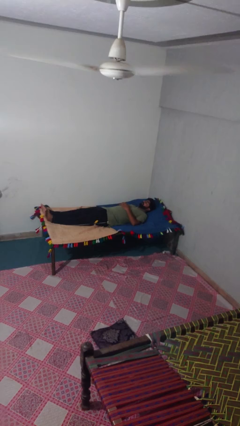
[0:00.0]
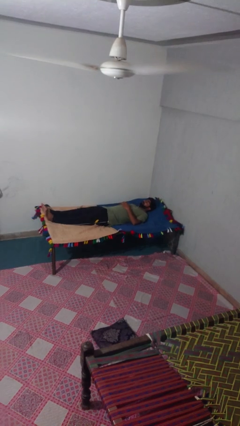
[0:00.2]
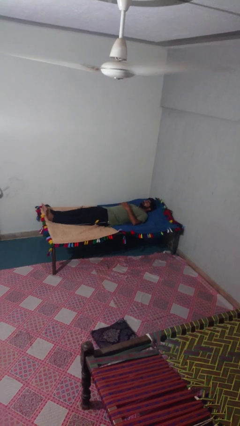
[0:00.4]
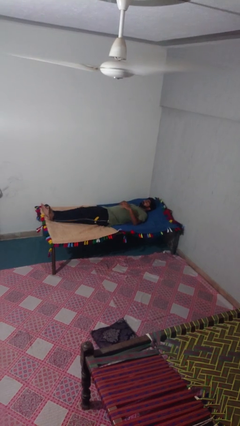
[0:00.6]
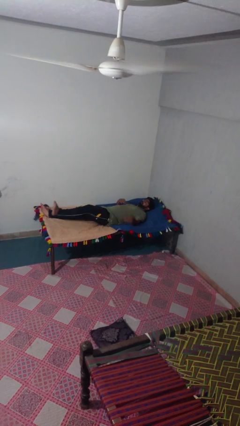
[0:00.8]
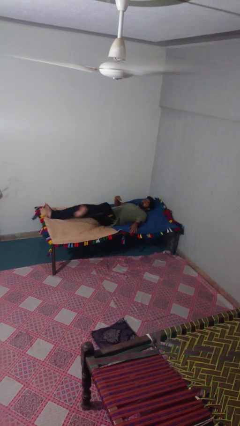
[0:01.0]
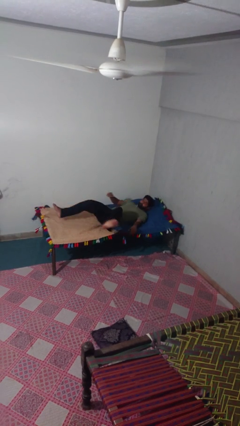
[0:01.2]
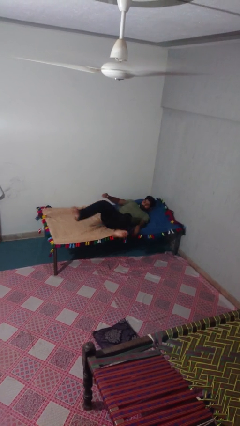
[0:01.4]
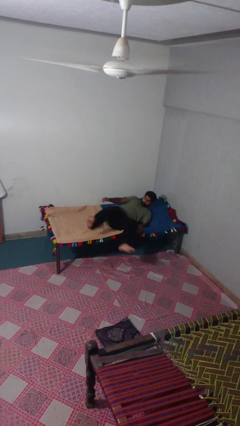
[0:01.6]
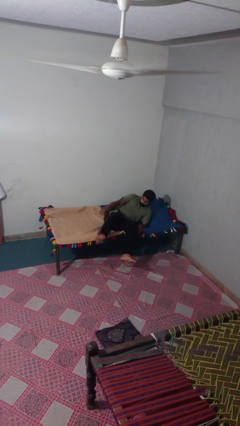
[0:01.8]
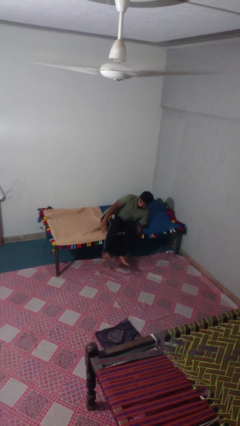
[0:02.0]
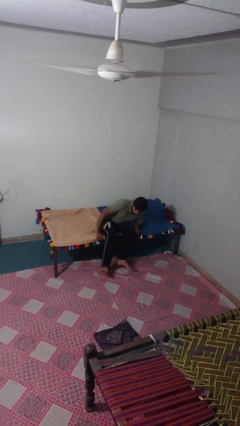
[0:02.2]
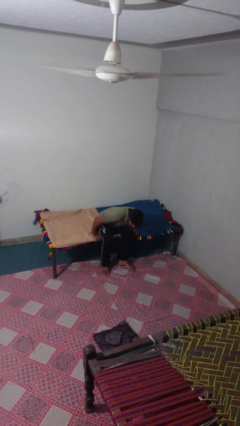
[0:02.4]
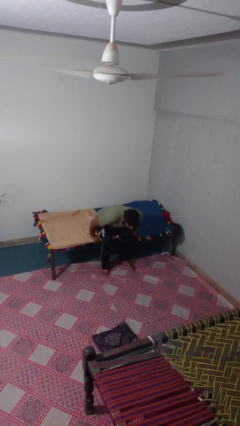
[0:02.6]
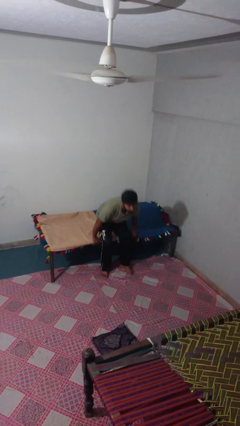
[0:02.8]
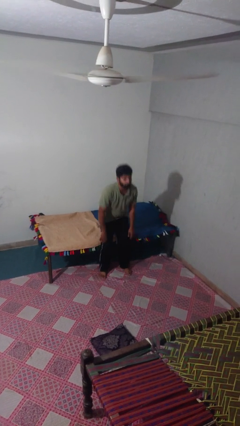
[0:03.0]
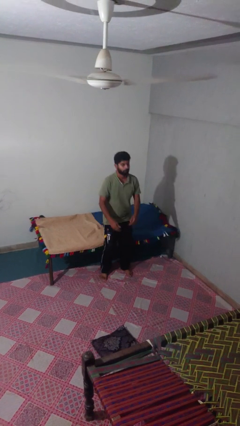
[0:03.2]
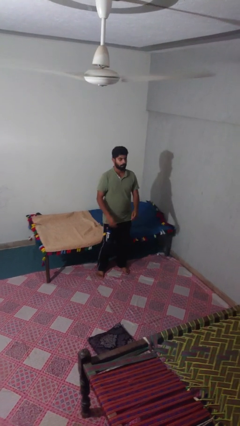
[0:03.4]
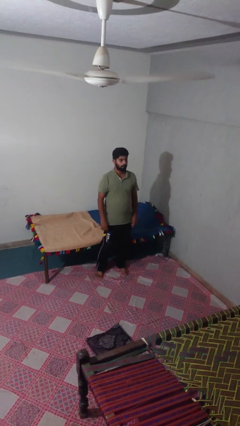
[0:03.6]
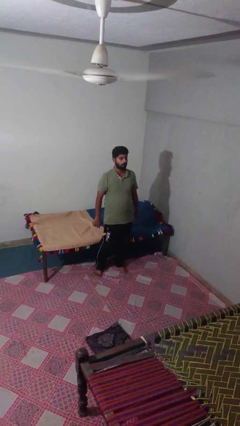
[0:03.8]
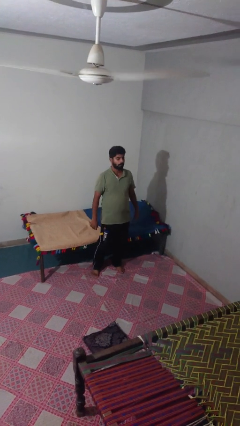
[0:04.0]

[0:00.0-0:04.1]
person stands up

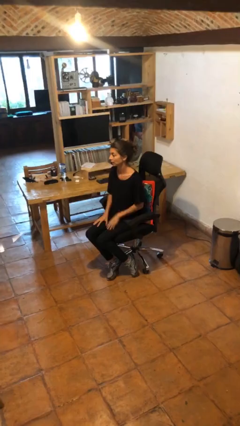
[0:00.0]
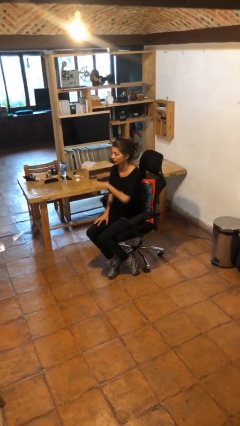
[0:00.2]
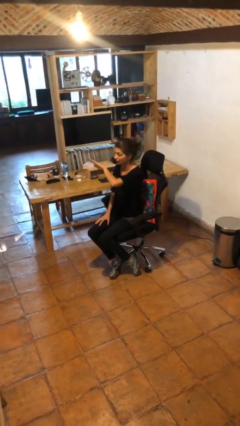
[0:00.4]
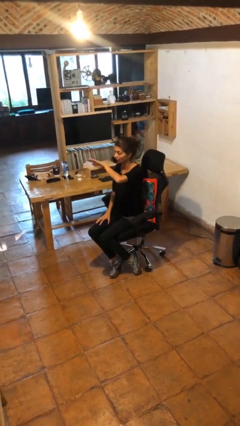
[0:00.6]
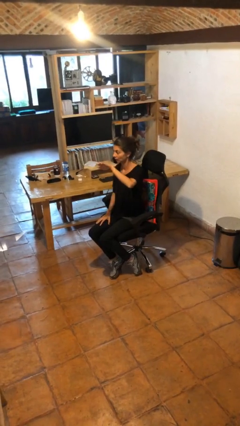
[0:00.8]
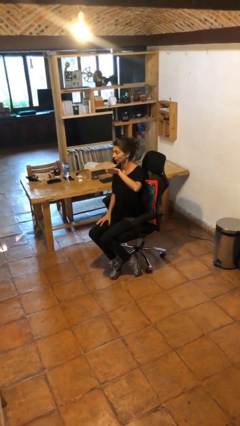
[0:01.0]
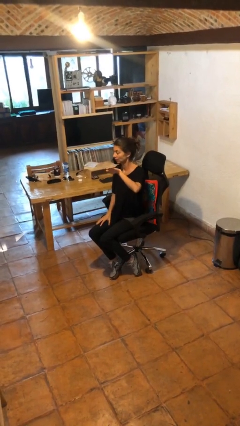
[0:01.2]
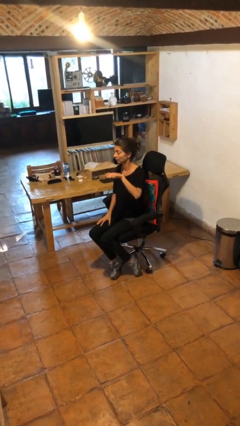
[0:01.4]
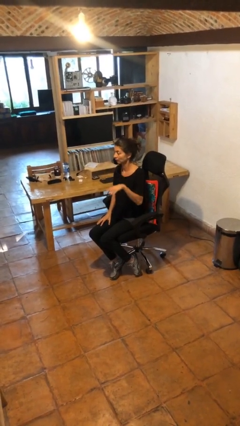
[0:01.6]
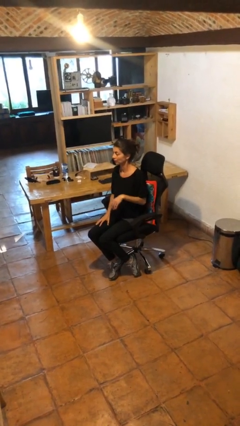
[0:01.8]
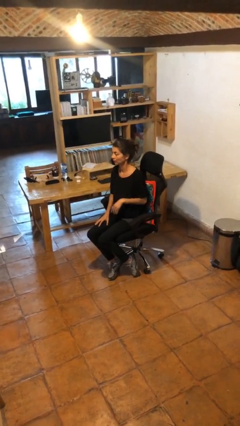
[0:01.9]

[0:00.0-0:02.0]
person gestures swipe left

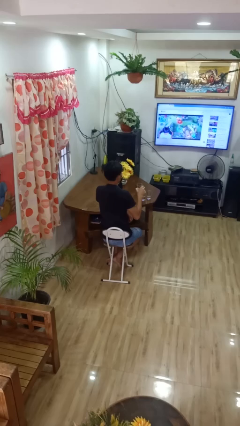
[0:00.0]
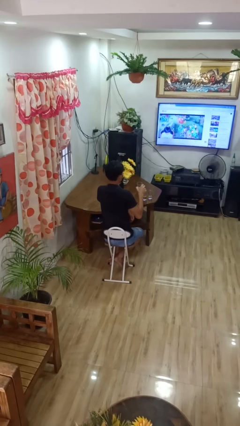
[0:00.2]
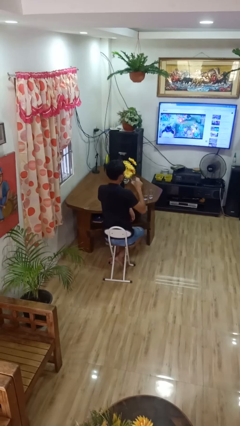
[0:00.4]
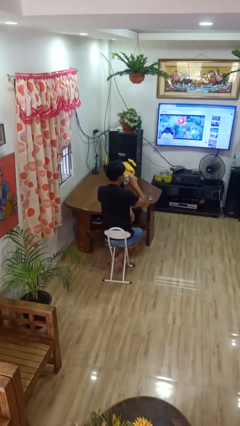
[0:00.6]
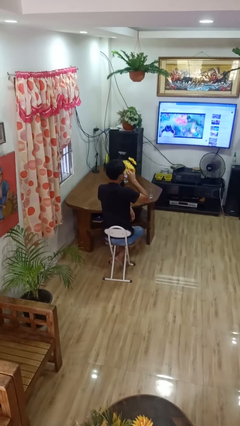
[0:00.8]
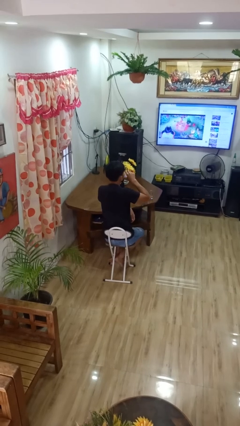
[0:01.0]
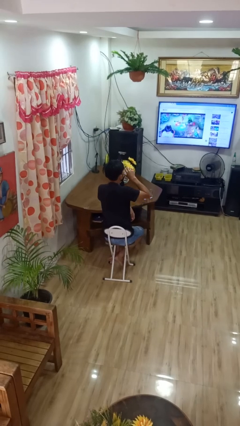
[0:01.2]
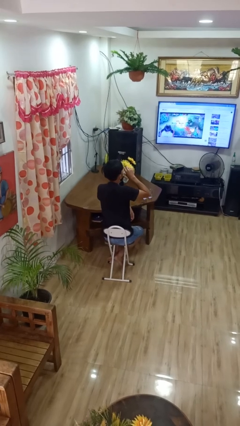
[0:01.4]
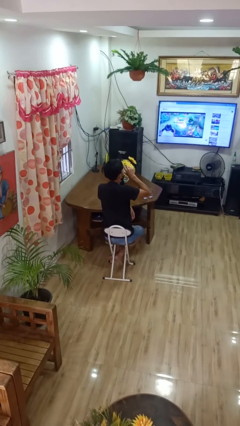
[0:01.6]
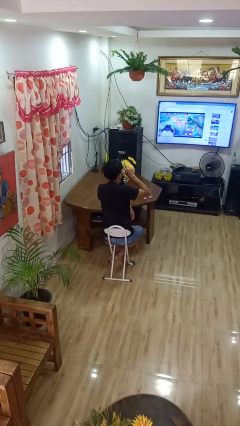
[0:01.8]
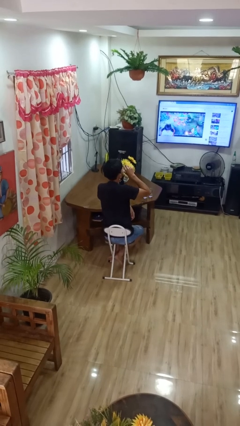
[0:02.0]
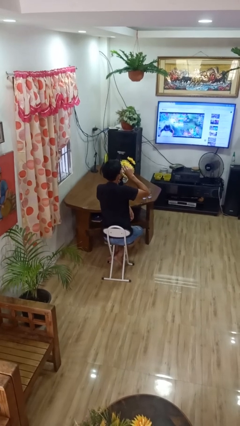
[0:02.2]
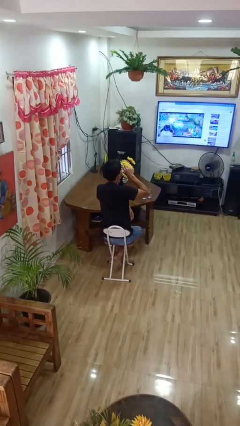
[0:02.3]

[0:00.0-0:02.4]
person drinks from shotglass

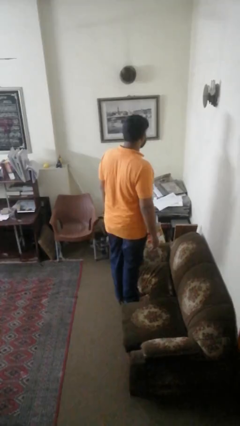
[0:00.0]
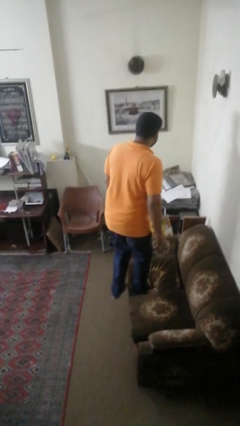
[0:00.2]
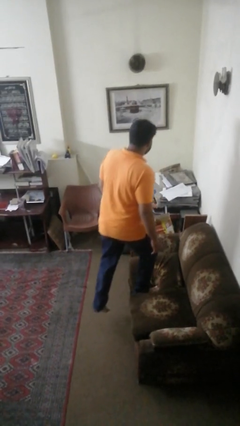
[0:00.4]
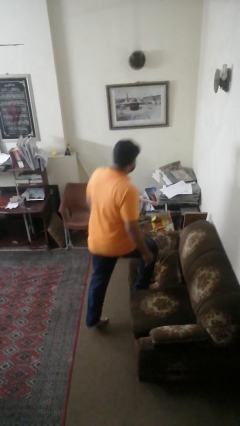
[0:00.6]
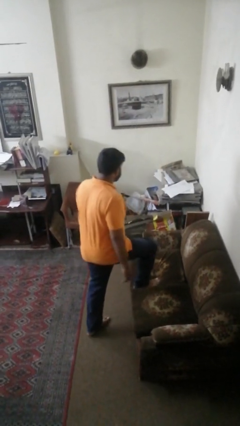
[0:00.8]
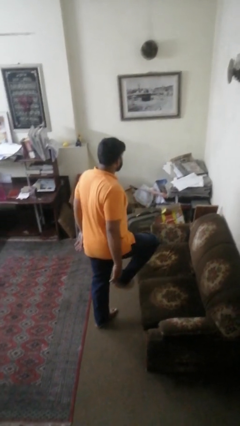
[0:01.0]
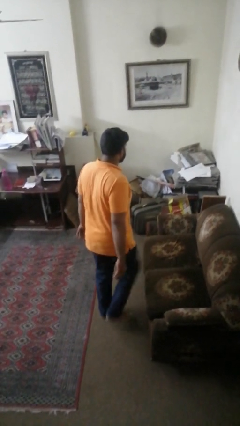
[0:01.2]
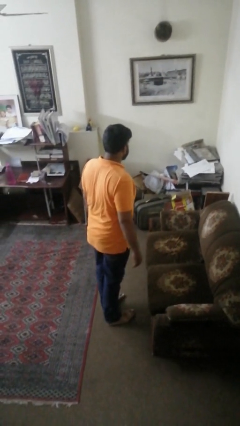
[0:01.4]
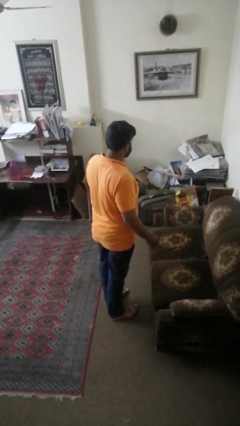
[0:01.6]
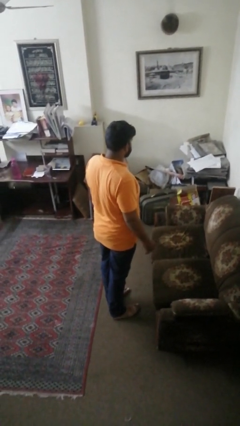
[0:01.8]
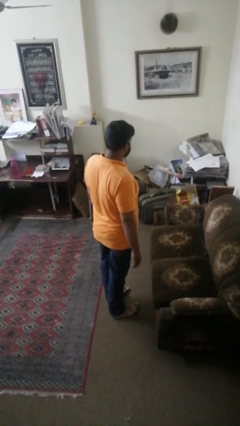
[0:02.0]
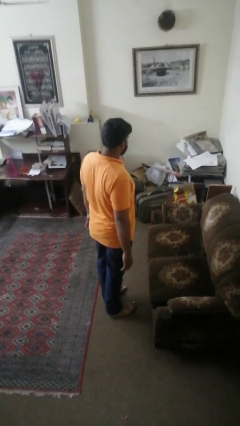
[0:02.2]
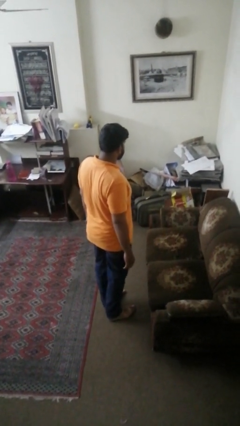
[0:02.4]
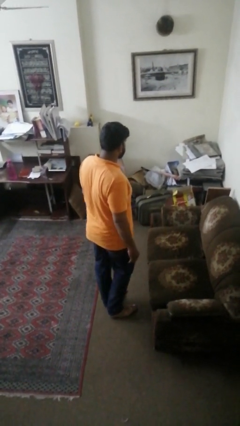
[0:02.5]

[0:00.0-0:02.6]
person climbs off couch

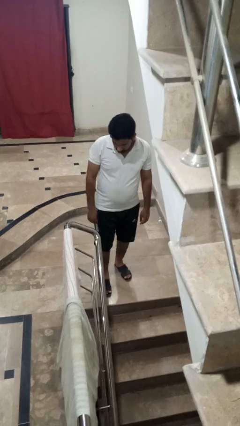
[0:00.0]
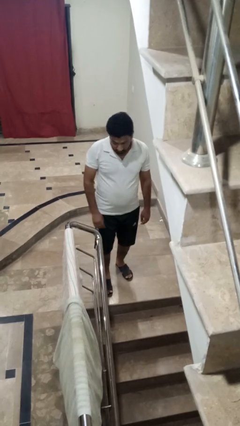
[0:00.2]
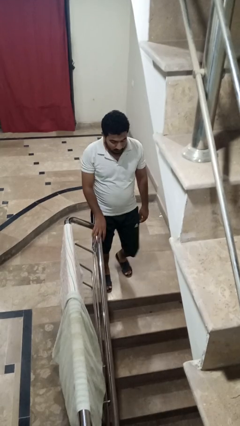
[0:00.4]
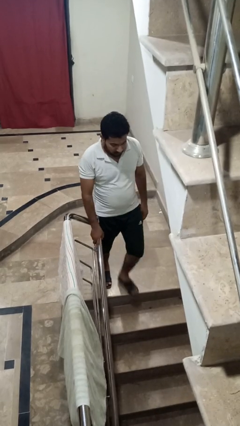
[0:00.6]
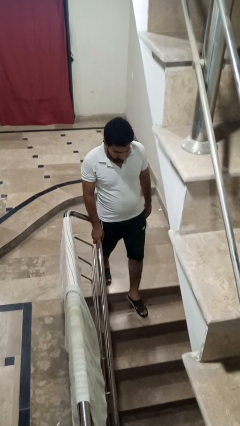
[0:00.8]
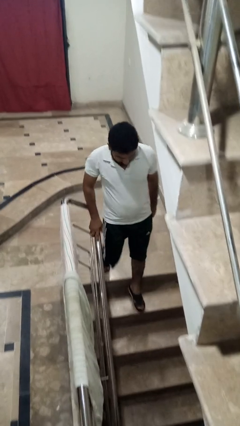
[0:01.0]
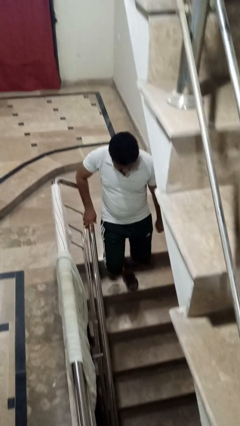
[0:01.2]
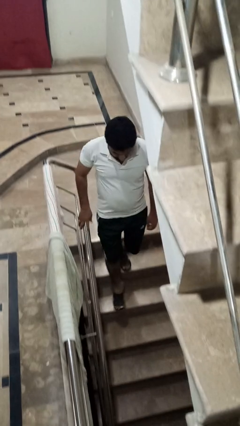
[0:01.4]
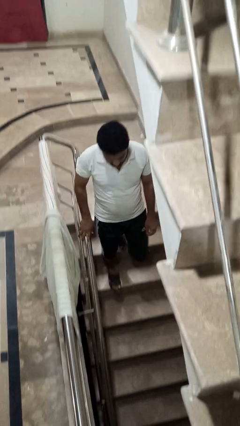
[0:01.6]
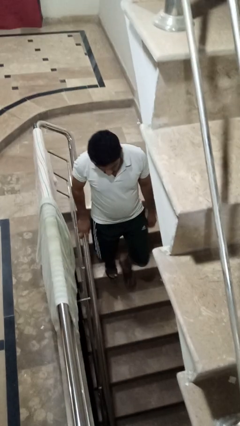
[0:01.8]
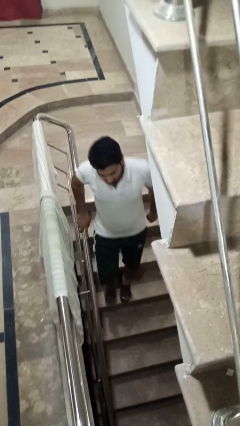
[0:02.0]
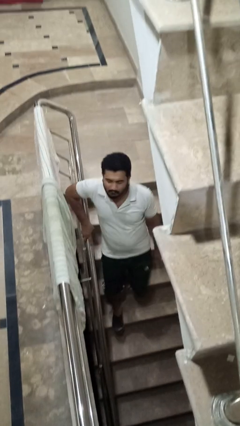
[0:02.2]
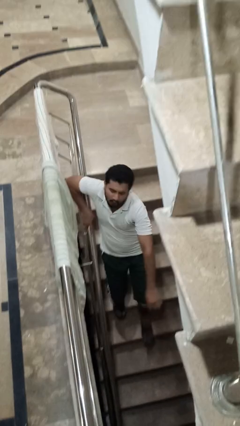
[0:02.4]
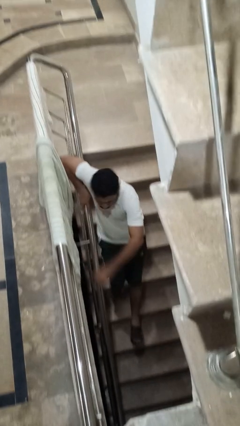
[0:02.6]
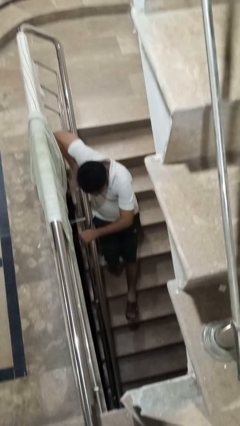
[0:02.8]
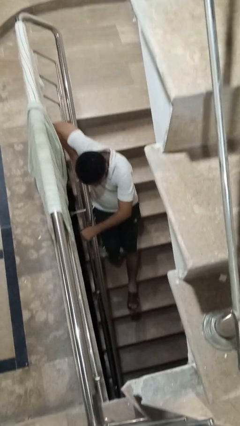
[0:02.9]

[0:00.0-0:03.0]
person climbs down stairs

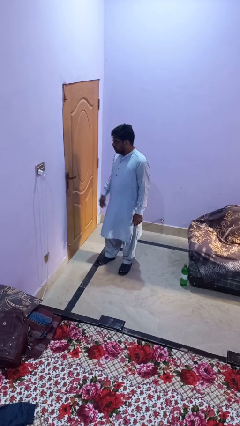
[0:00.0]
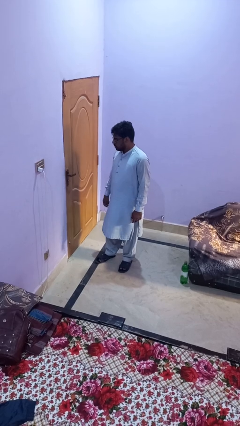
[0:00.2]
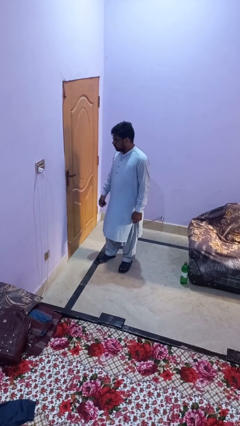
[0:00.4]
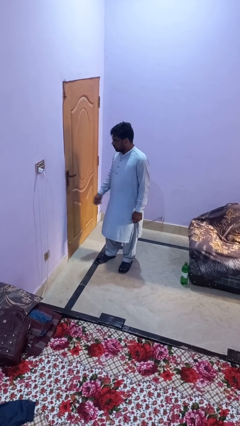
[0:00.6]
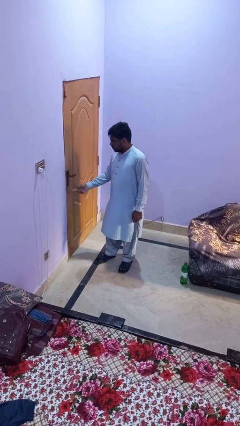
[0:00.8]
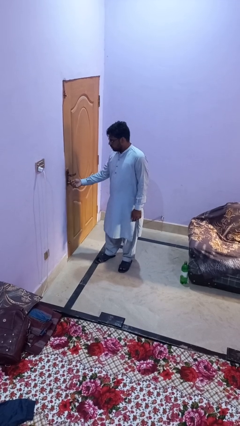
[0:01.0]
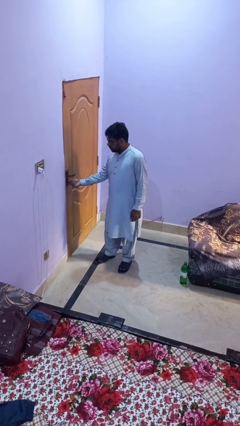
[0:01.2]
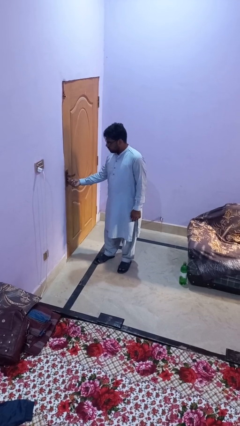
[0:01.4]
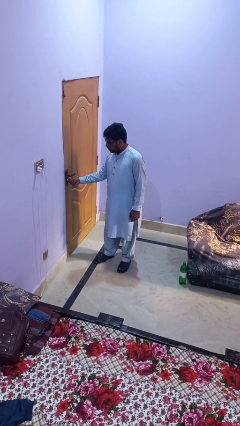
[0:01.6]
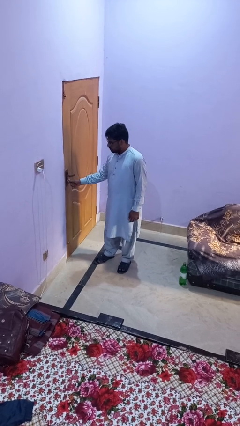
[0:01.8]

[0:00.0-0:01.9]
person locks door with keys

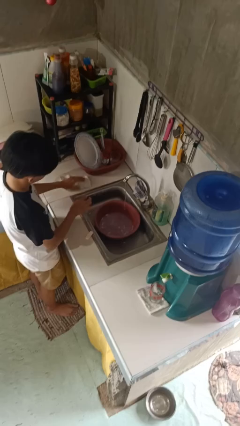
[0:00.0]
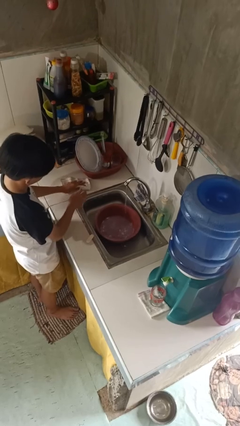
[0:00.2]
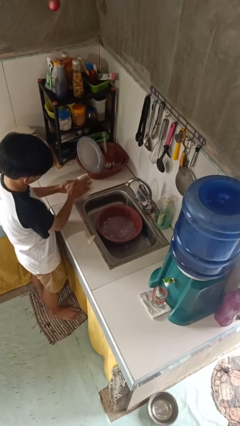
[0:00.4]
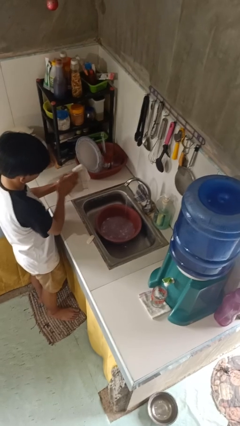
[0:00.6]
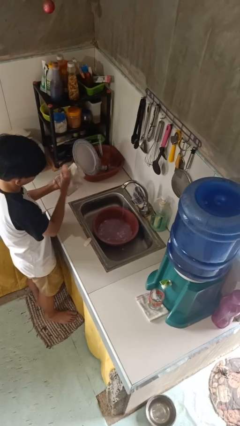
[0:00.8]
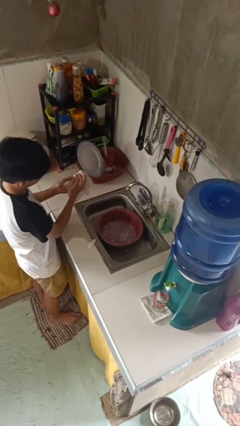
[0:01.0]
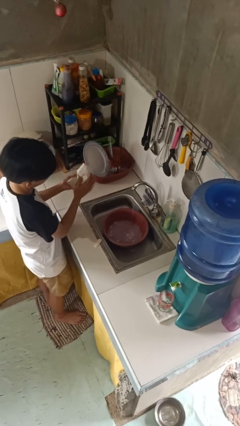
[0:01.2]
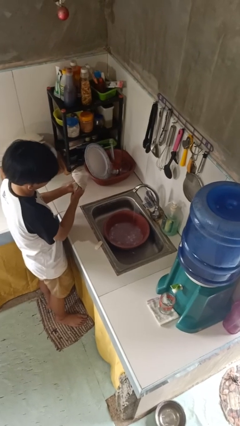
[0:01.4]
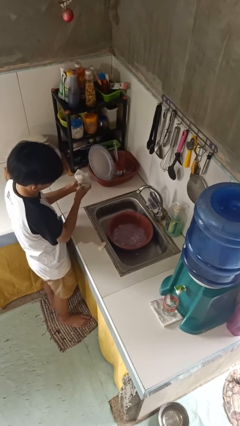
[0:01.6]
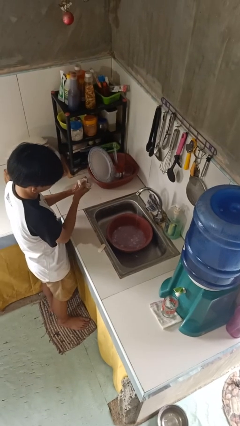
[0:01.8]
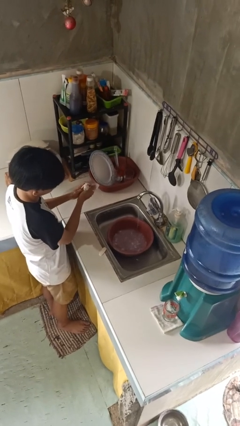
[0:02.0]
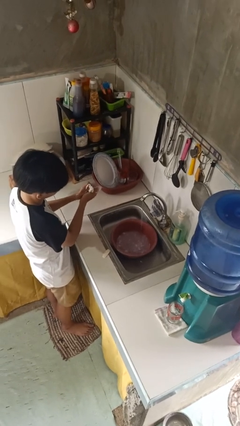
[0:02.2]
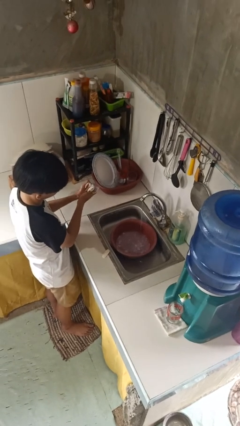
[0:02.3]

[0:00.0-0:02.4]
person dries hands with towel
